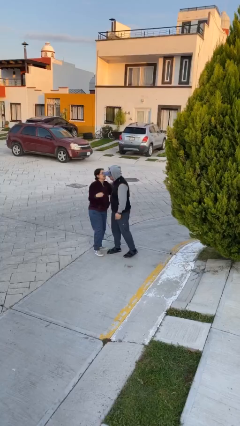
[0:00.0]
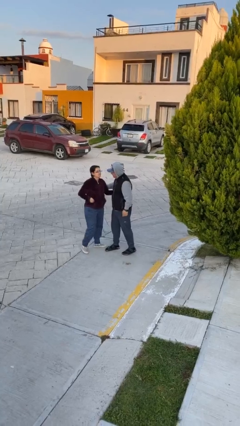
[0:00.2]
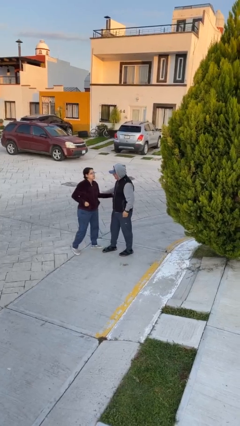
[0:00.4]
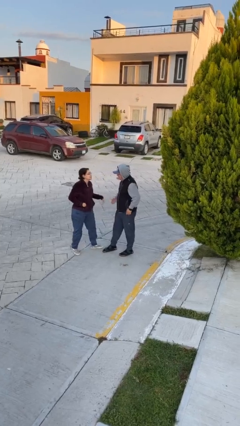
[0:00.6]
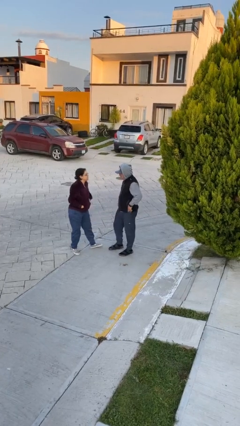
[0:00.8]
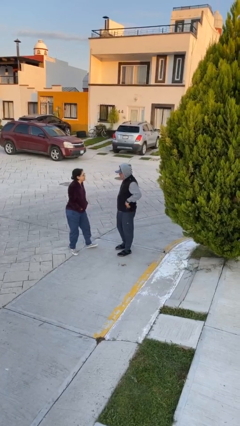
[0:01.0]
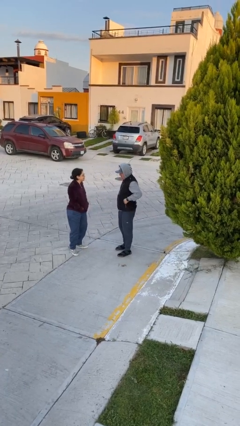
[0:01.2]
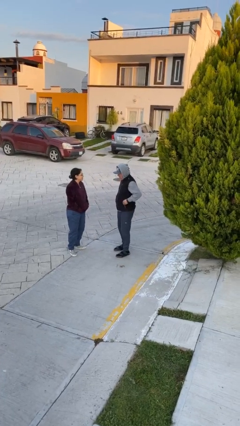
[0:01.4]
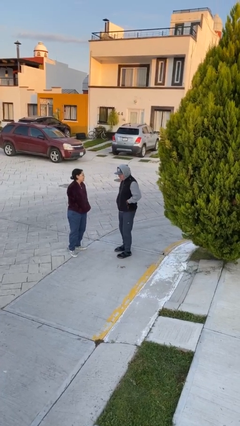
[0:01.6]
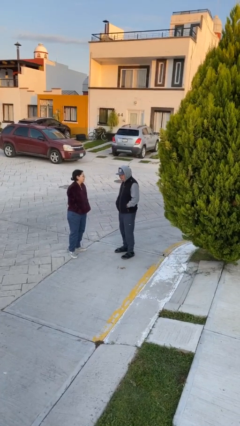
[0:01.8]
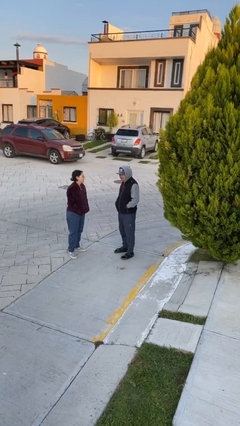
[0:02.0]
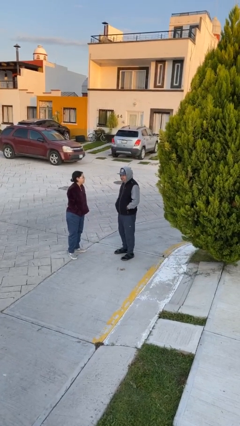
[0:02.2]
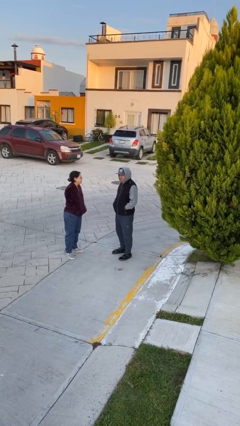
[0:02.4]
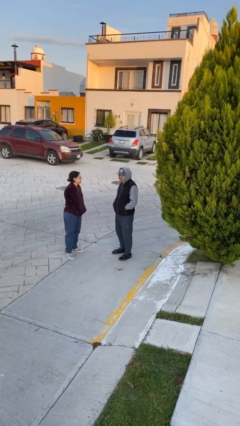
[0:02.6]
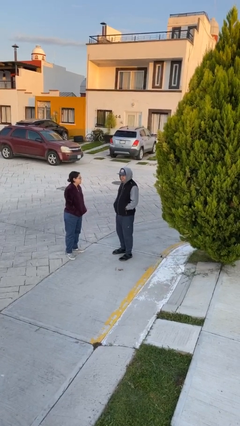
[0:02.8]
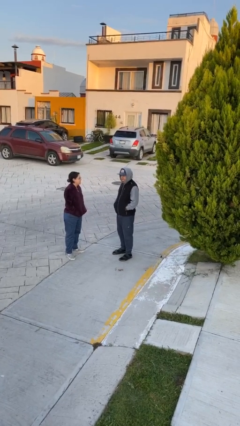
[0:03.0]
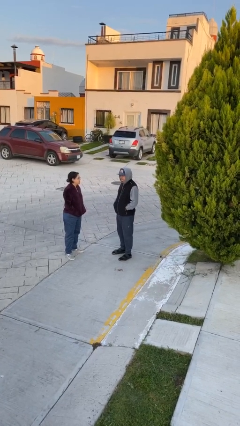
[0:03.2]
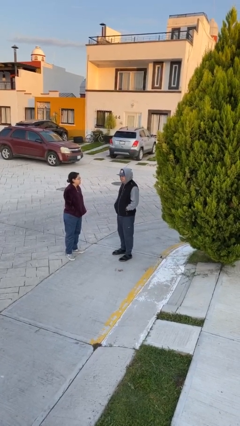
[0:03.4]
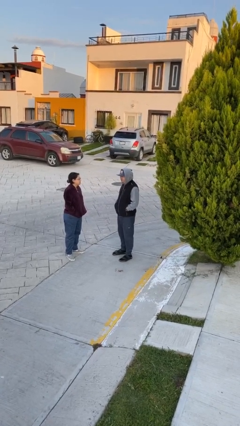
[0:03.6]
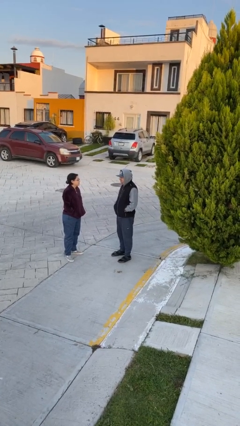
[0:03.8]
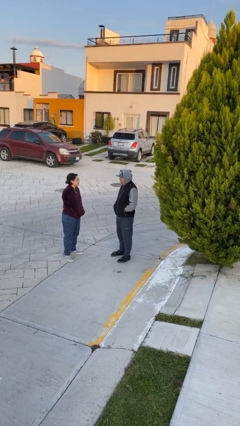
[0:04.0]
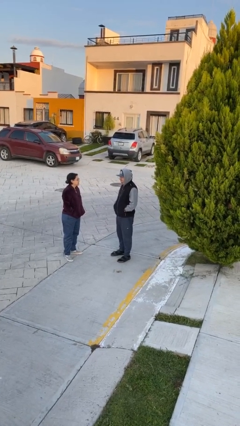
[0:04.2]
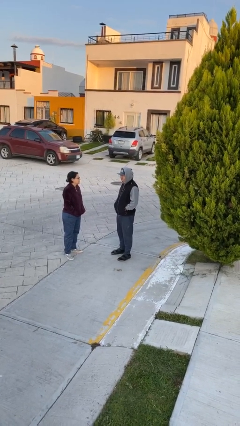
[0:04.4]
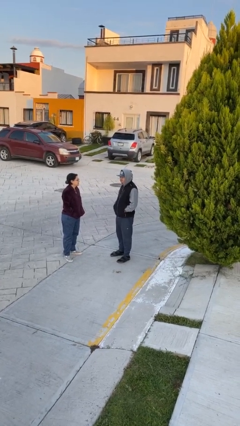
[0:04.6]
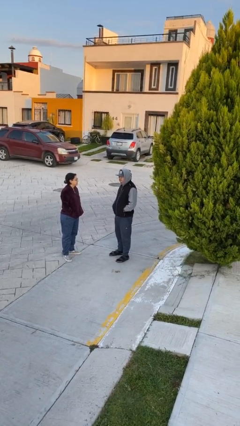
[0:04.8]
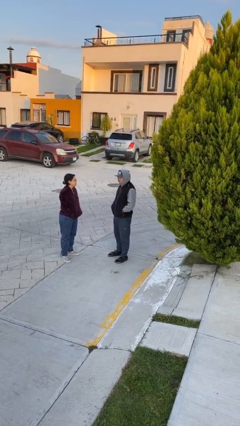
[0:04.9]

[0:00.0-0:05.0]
person talks to person

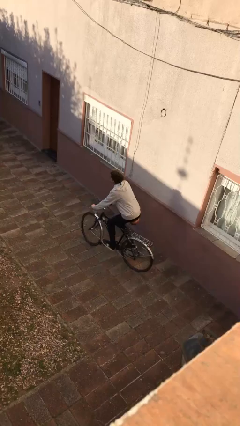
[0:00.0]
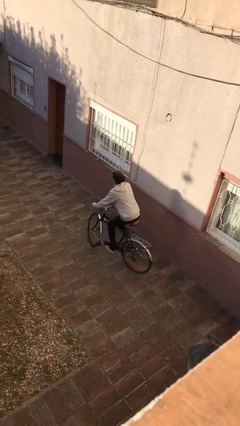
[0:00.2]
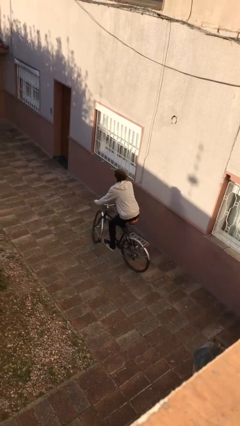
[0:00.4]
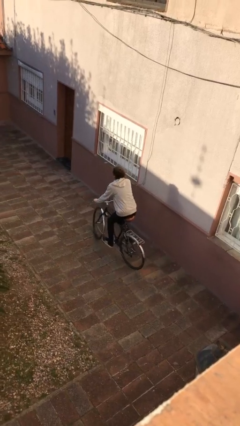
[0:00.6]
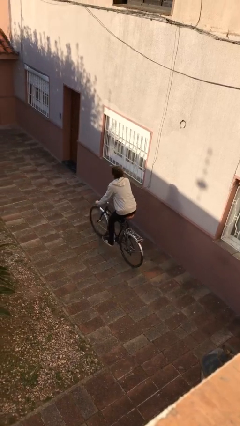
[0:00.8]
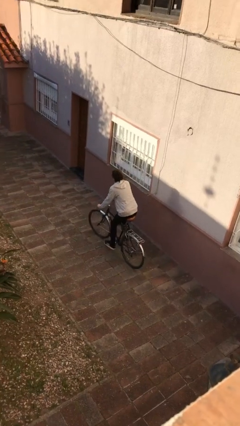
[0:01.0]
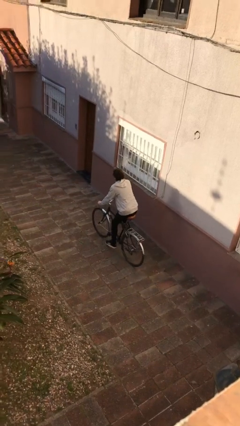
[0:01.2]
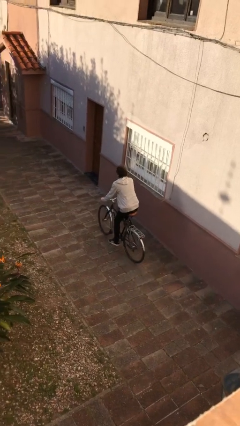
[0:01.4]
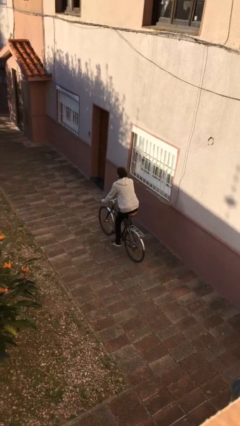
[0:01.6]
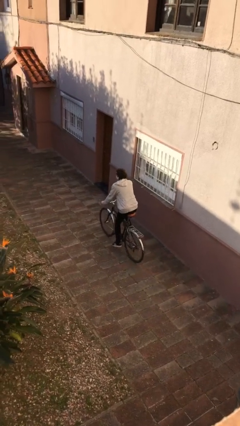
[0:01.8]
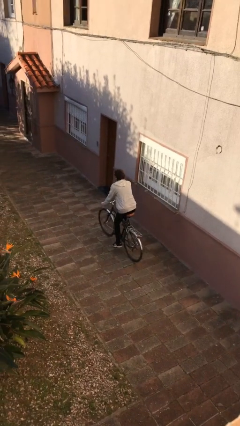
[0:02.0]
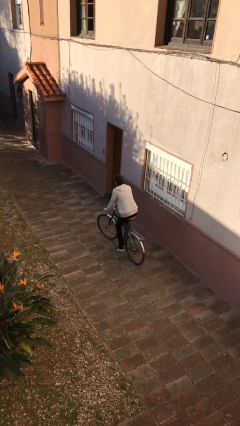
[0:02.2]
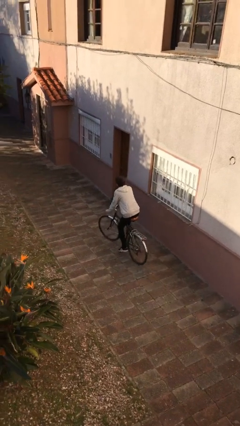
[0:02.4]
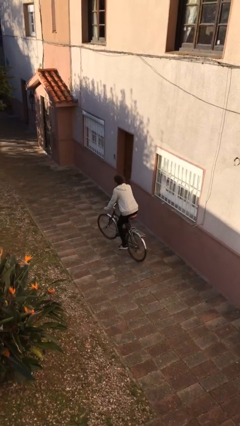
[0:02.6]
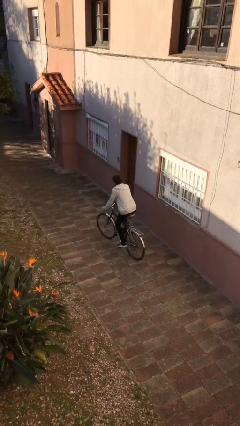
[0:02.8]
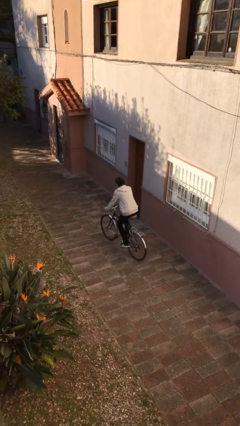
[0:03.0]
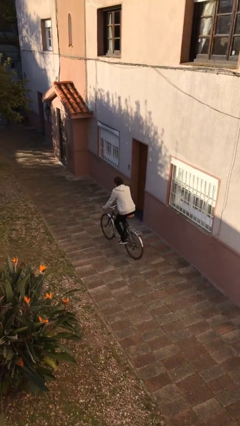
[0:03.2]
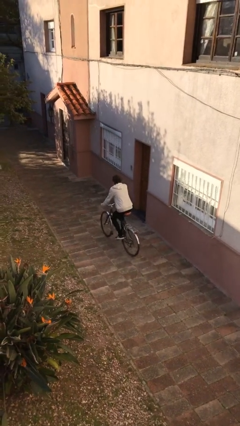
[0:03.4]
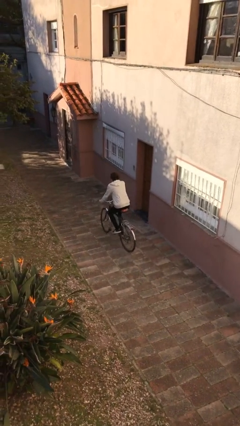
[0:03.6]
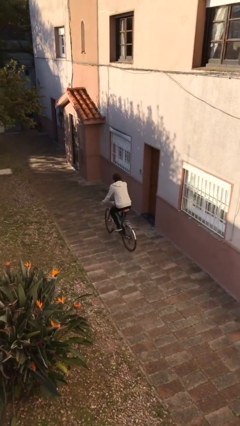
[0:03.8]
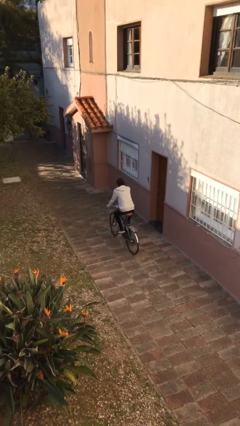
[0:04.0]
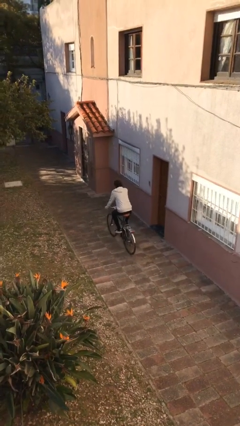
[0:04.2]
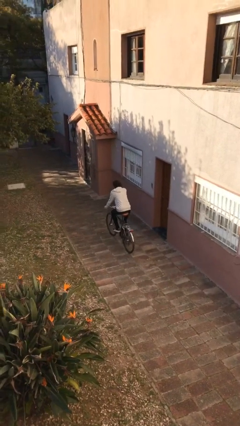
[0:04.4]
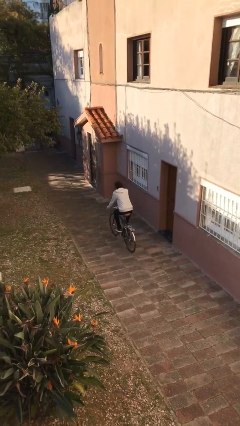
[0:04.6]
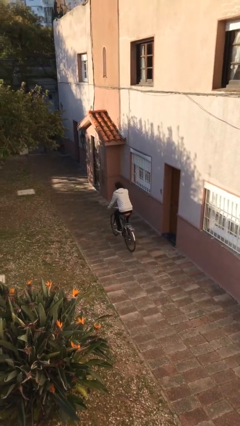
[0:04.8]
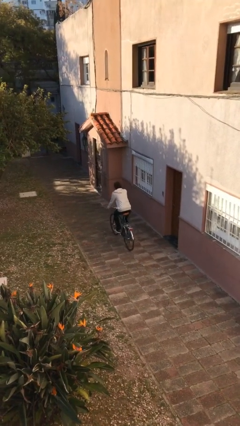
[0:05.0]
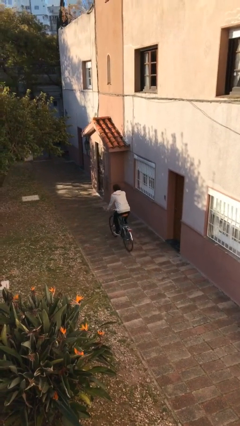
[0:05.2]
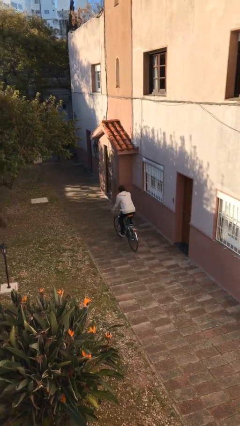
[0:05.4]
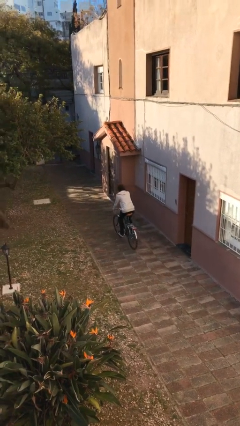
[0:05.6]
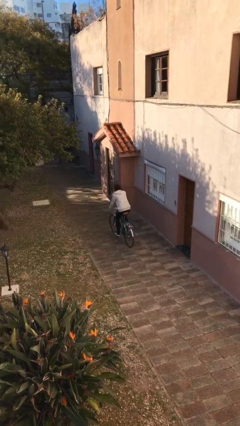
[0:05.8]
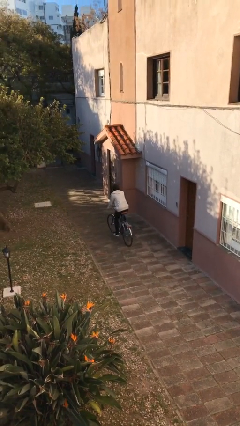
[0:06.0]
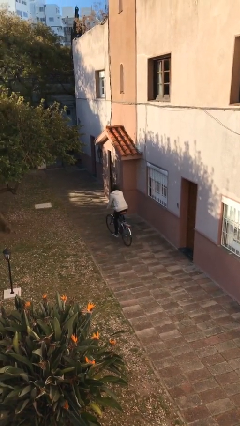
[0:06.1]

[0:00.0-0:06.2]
person rides bicycle

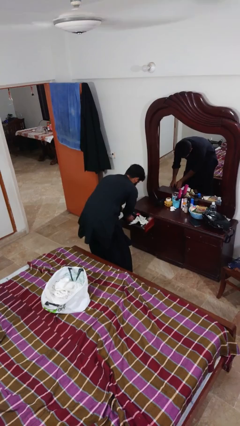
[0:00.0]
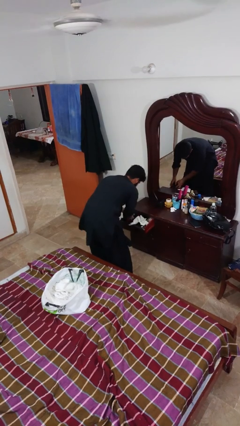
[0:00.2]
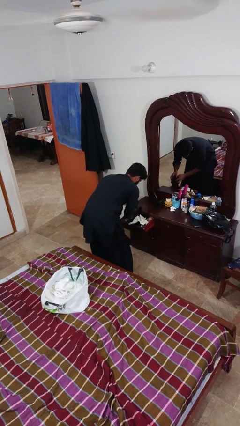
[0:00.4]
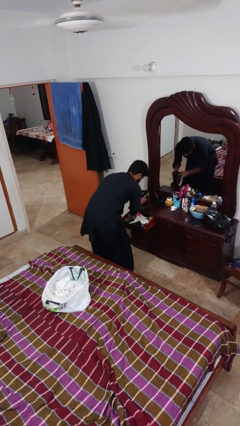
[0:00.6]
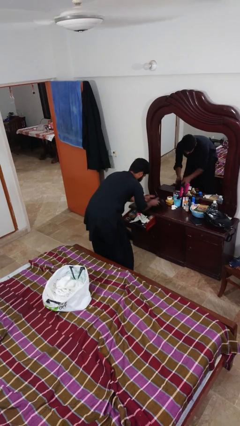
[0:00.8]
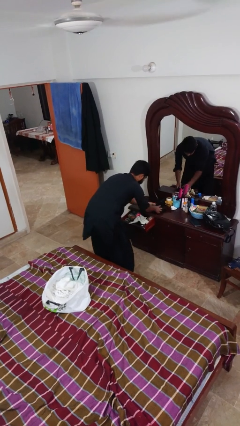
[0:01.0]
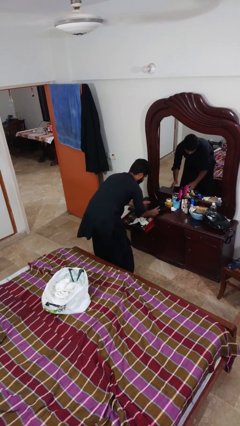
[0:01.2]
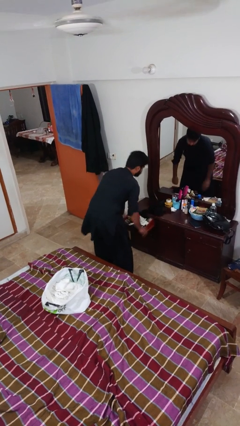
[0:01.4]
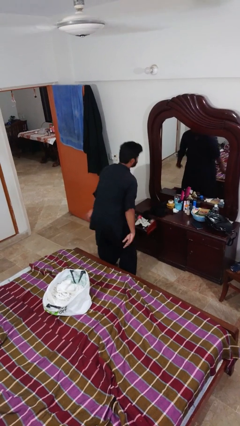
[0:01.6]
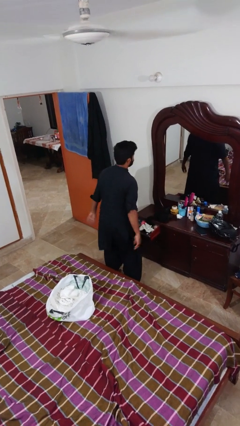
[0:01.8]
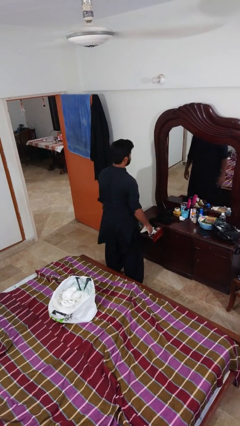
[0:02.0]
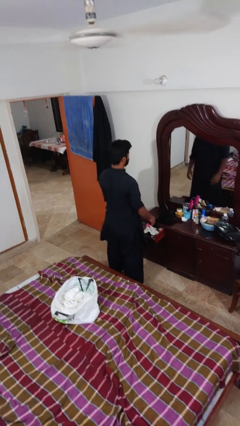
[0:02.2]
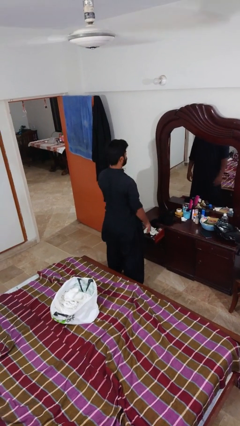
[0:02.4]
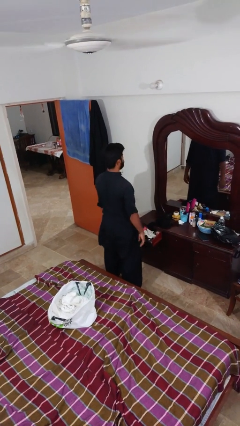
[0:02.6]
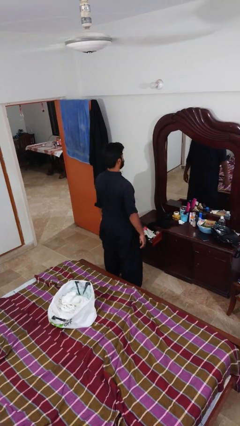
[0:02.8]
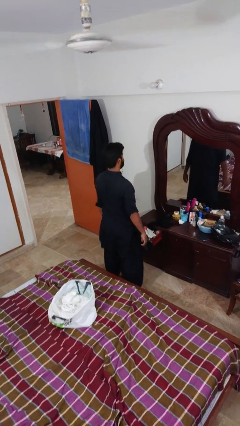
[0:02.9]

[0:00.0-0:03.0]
person takes clothes from dresser

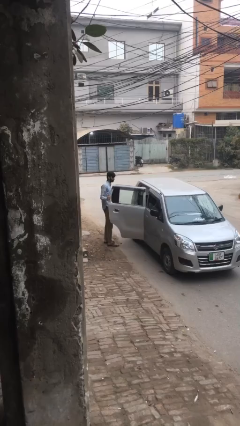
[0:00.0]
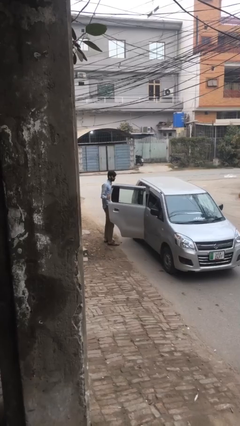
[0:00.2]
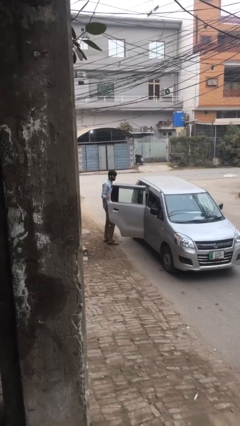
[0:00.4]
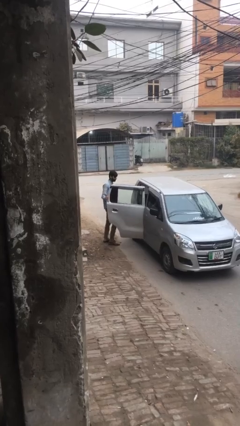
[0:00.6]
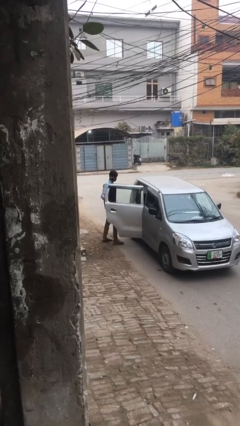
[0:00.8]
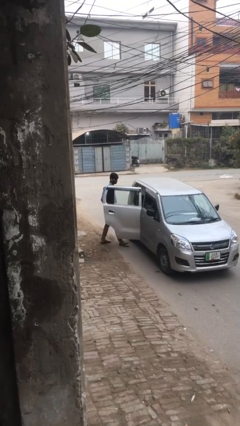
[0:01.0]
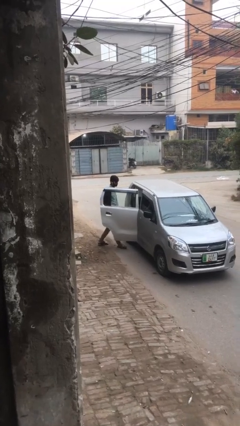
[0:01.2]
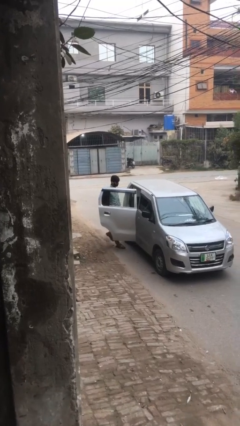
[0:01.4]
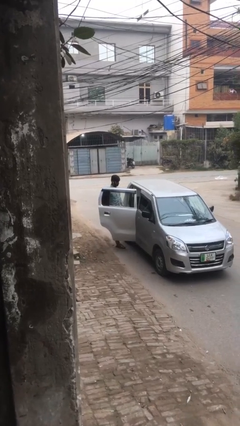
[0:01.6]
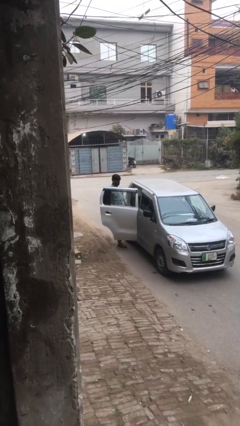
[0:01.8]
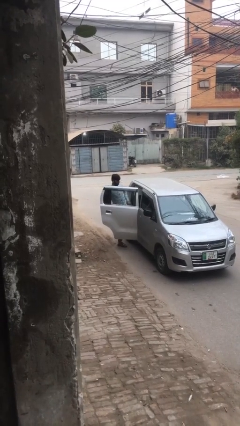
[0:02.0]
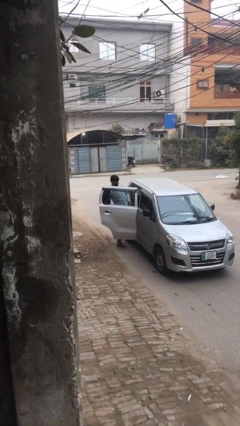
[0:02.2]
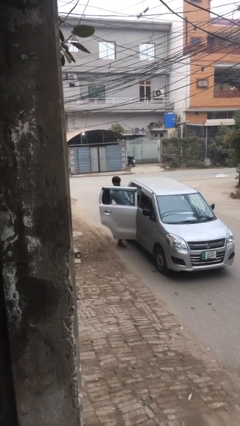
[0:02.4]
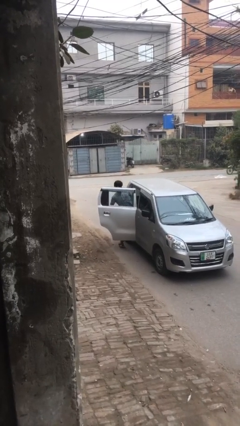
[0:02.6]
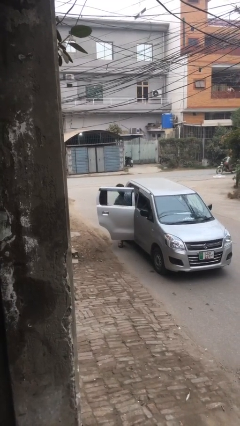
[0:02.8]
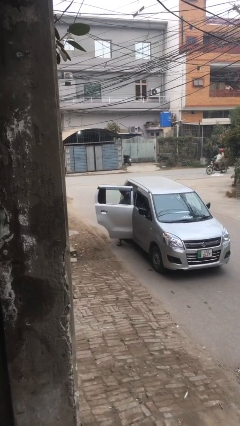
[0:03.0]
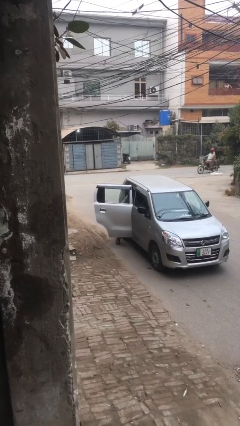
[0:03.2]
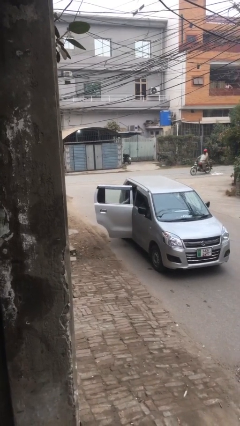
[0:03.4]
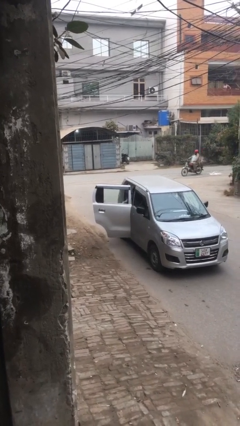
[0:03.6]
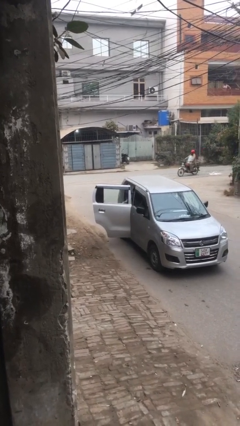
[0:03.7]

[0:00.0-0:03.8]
person enters car
